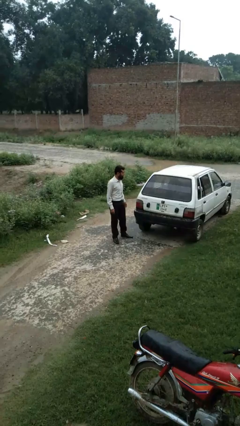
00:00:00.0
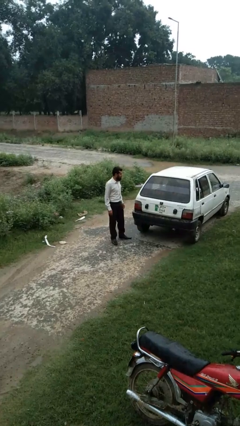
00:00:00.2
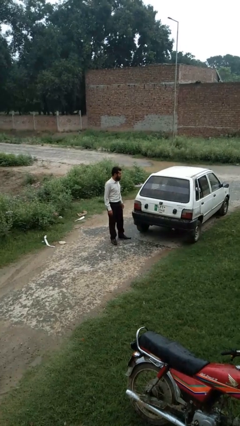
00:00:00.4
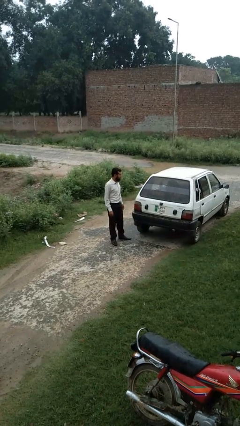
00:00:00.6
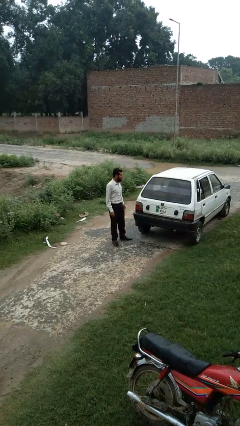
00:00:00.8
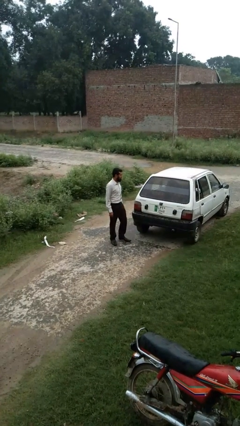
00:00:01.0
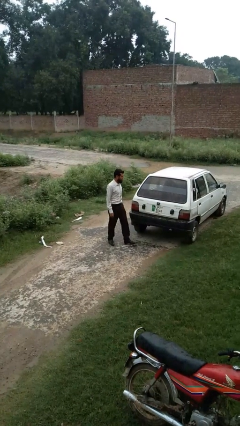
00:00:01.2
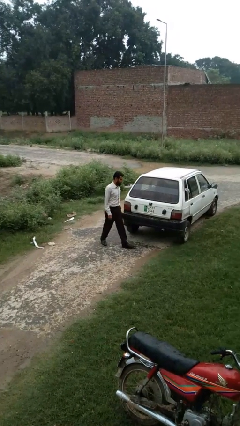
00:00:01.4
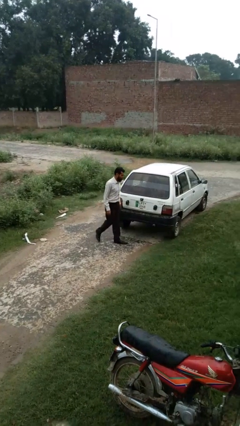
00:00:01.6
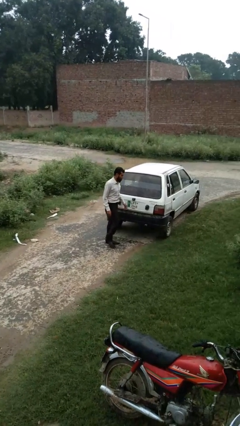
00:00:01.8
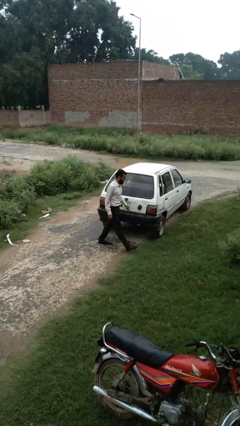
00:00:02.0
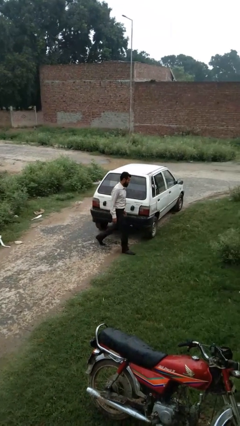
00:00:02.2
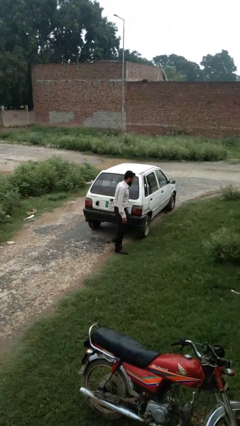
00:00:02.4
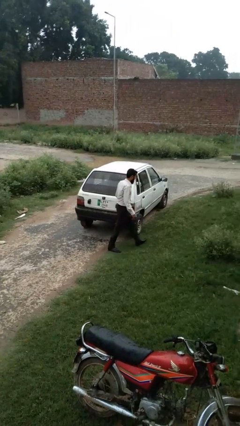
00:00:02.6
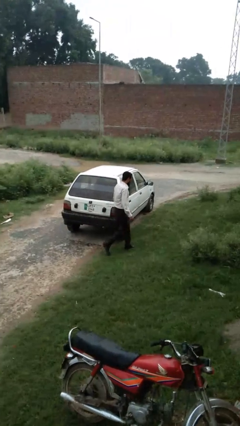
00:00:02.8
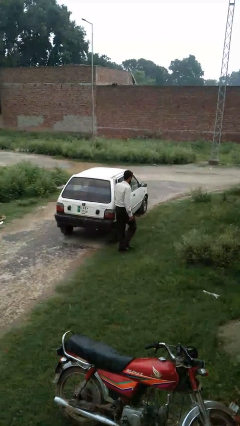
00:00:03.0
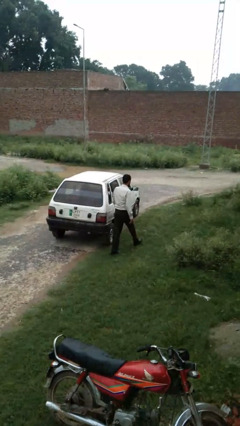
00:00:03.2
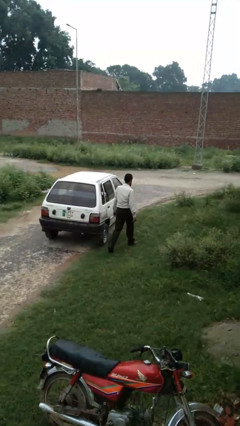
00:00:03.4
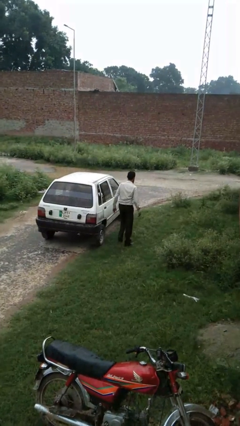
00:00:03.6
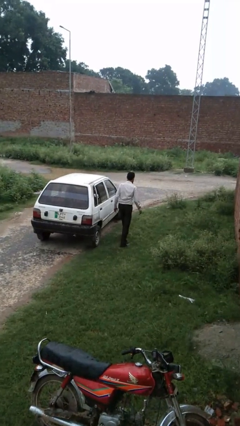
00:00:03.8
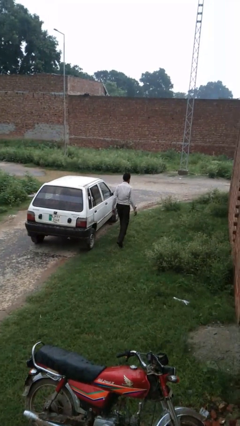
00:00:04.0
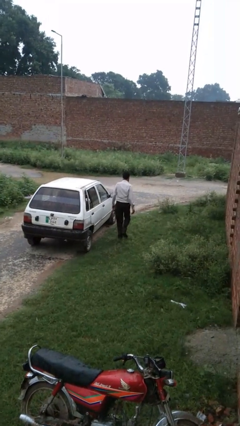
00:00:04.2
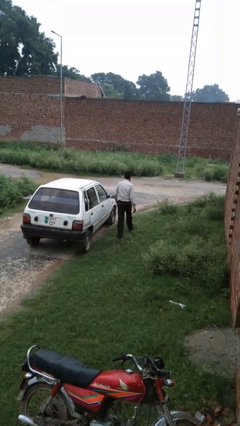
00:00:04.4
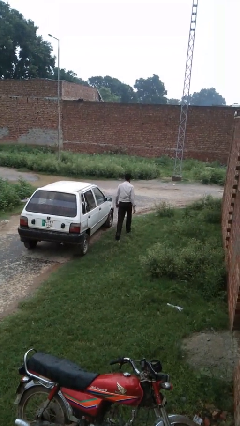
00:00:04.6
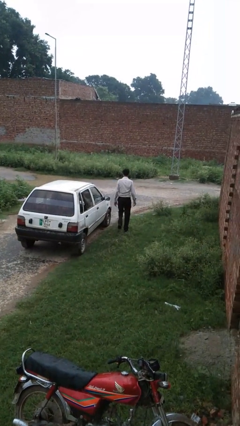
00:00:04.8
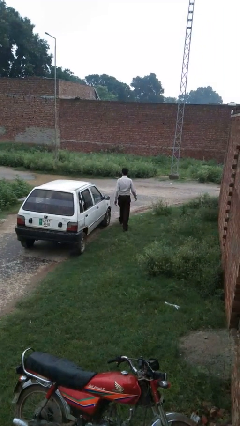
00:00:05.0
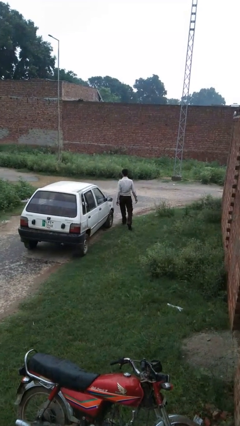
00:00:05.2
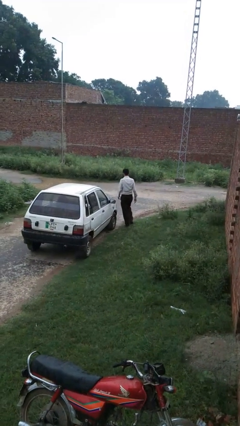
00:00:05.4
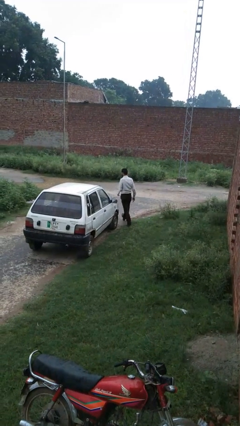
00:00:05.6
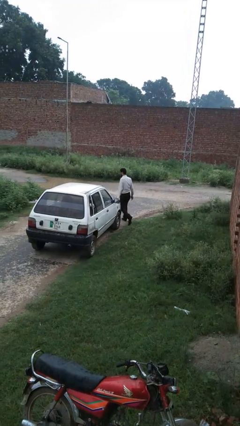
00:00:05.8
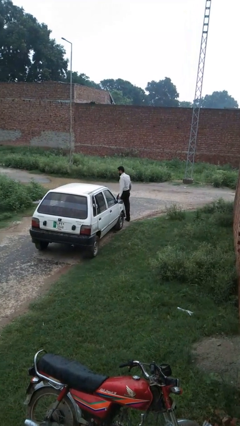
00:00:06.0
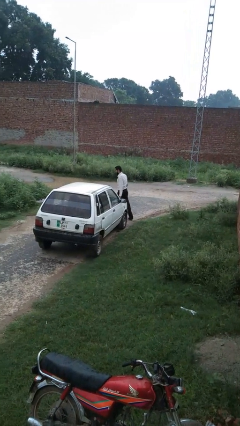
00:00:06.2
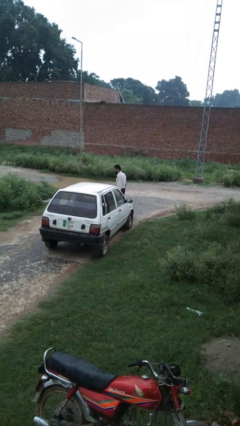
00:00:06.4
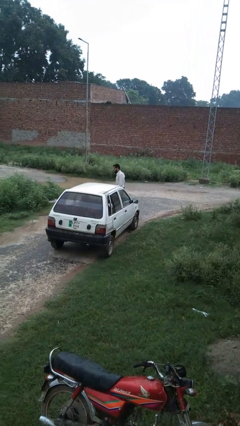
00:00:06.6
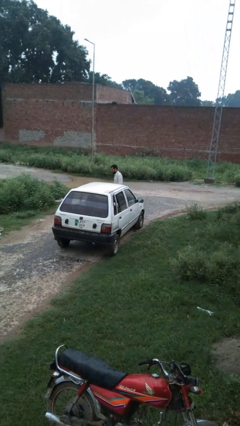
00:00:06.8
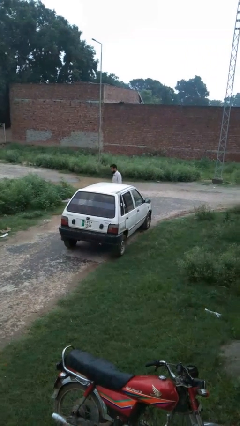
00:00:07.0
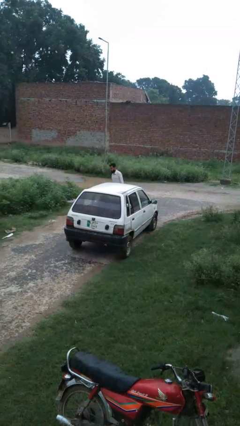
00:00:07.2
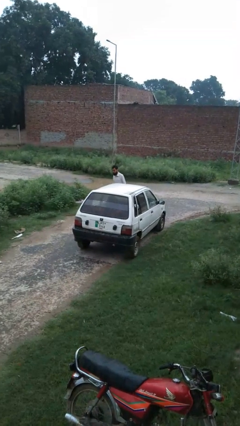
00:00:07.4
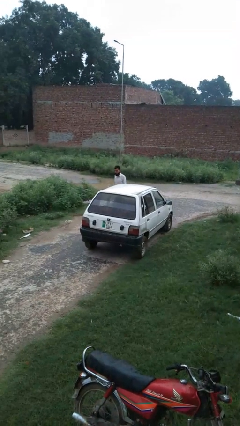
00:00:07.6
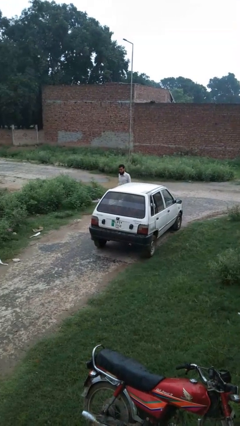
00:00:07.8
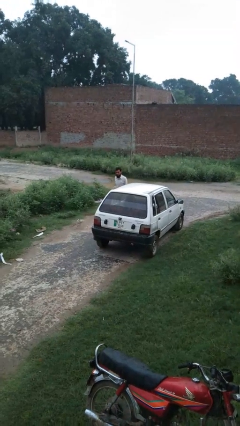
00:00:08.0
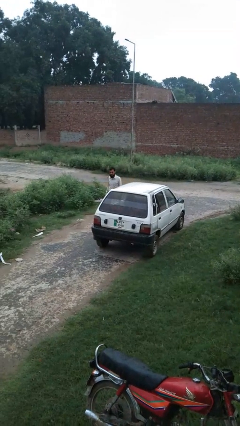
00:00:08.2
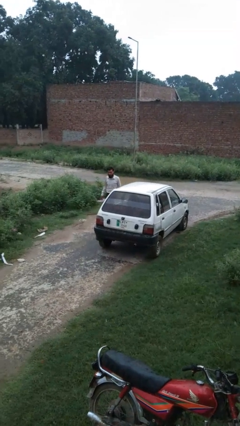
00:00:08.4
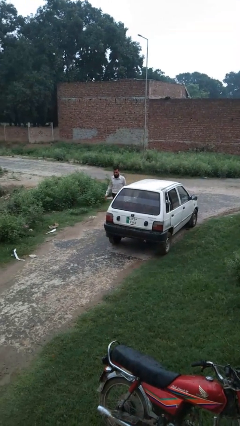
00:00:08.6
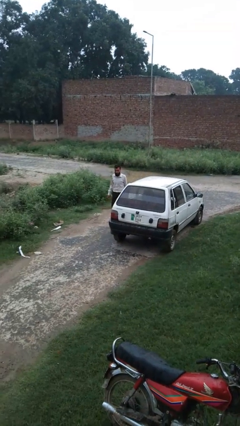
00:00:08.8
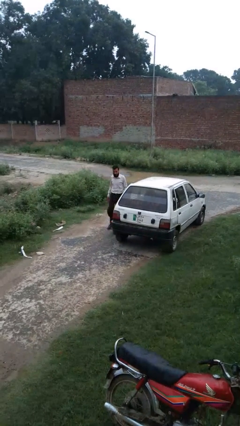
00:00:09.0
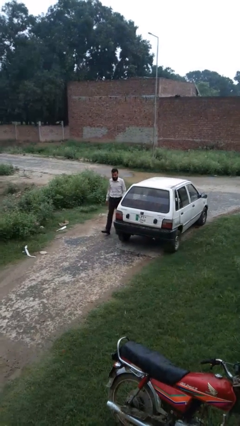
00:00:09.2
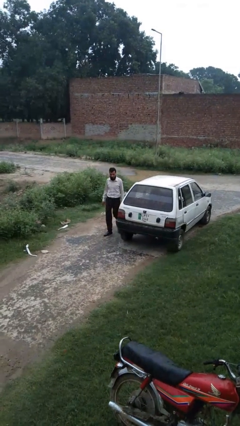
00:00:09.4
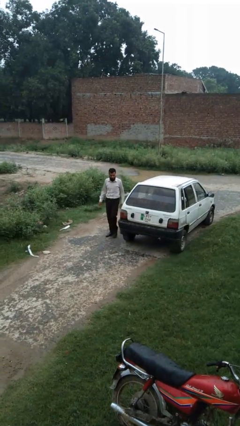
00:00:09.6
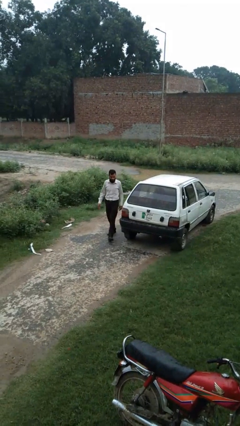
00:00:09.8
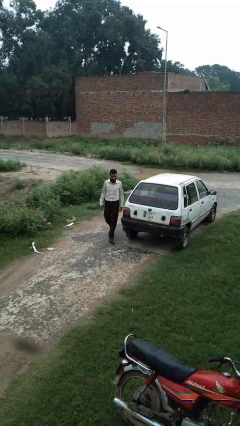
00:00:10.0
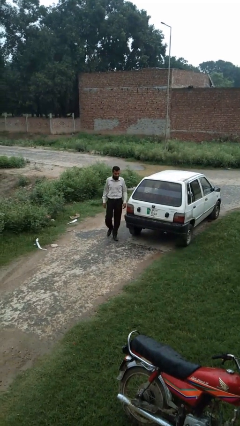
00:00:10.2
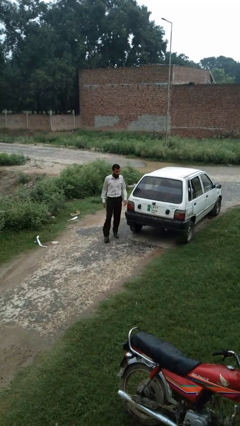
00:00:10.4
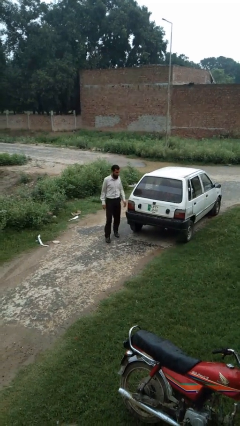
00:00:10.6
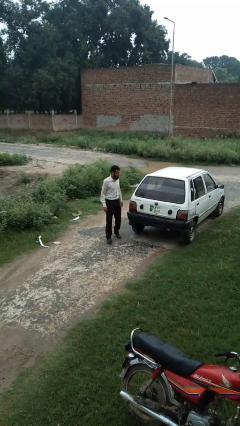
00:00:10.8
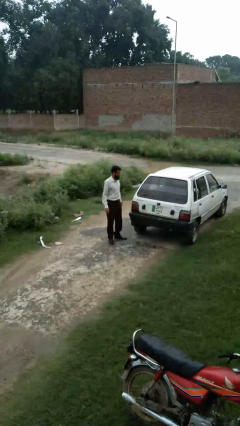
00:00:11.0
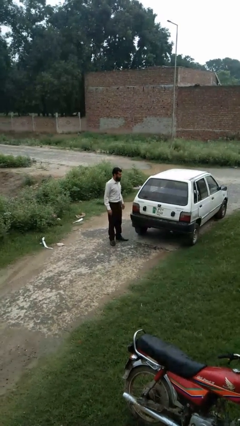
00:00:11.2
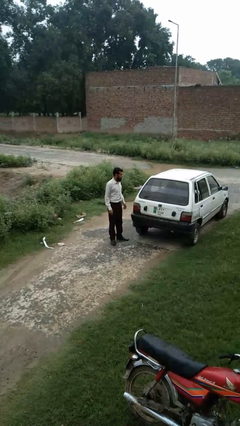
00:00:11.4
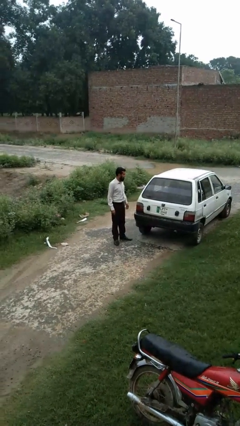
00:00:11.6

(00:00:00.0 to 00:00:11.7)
person walks around car

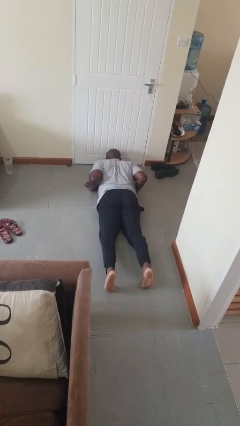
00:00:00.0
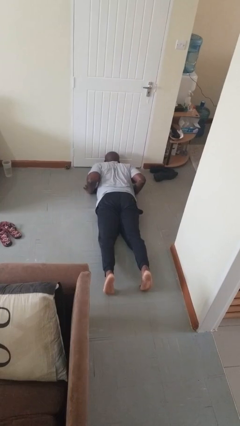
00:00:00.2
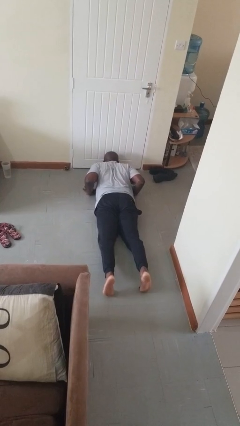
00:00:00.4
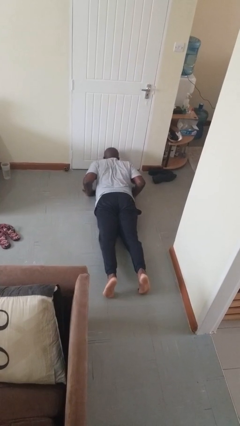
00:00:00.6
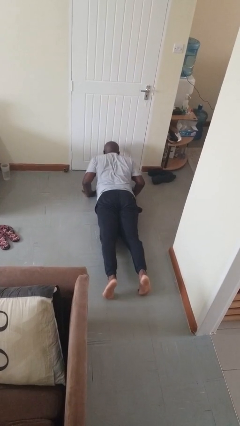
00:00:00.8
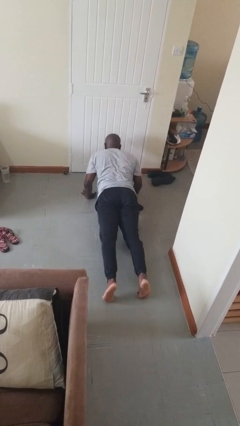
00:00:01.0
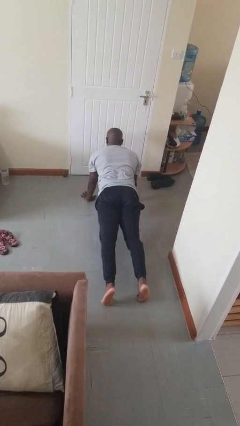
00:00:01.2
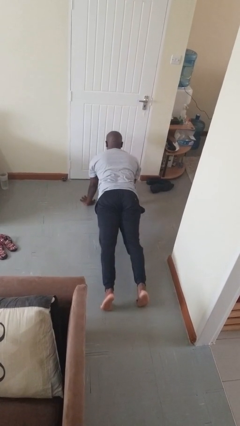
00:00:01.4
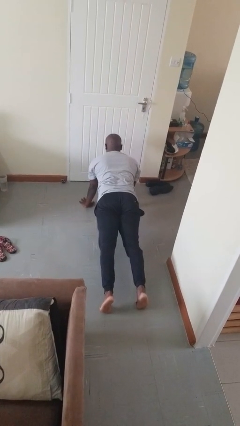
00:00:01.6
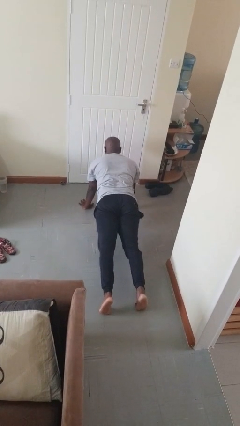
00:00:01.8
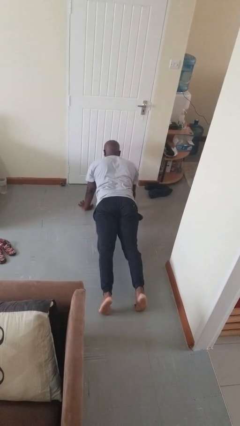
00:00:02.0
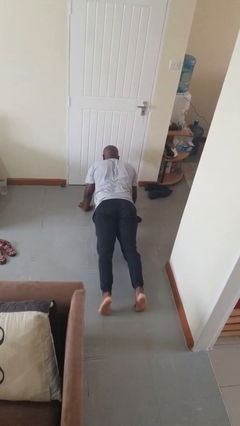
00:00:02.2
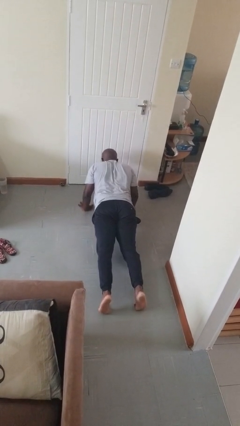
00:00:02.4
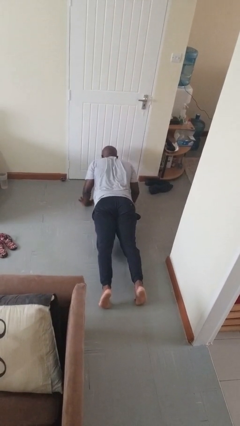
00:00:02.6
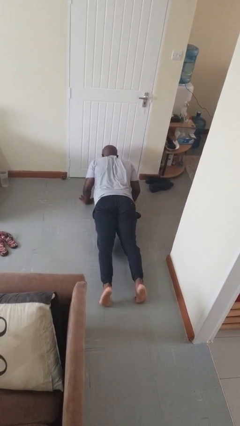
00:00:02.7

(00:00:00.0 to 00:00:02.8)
person exercises with pushup

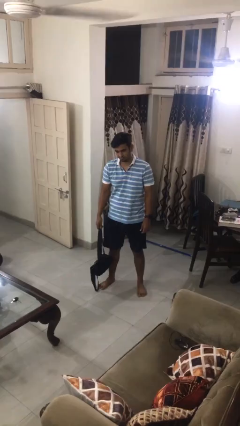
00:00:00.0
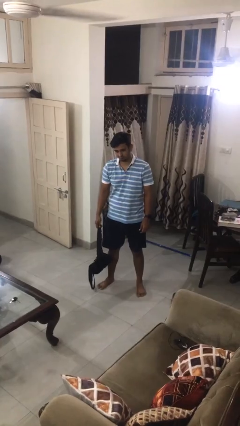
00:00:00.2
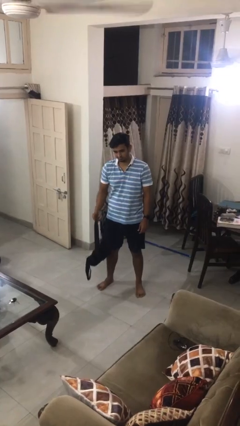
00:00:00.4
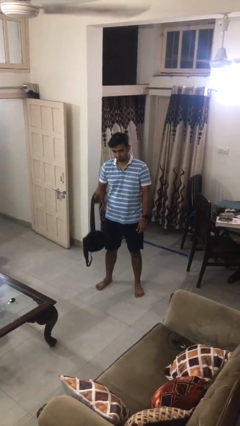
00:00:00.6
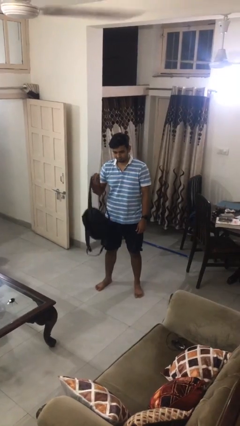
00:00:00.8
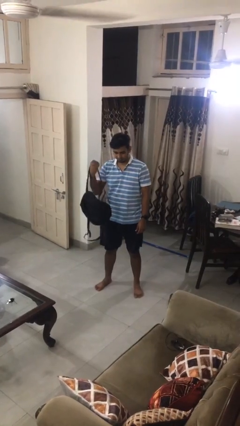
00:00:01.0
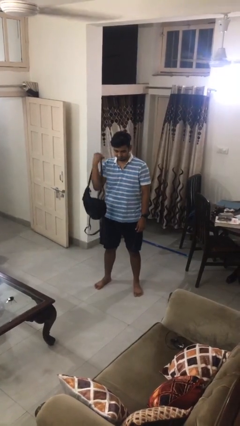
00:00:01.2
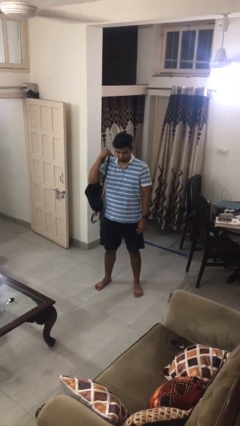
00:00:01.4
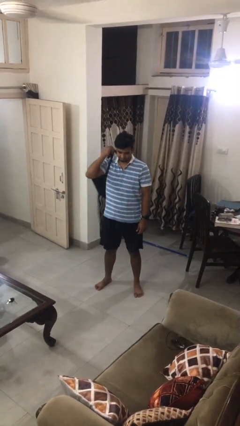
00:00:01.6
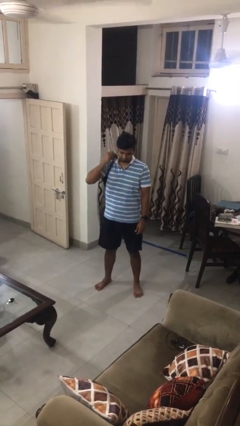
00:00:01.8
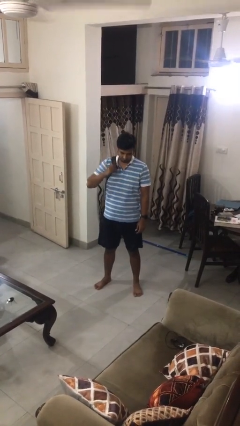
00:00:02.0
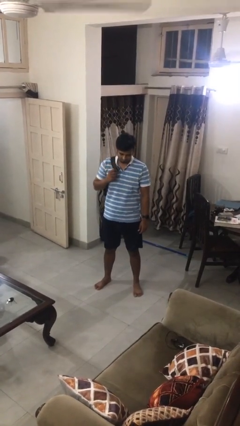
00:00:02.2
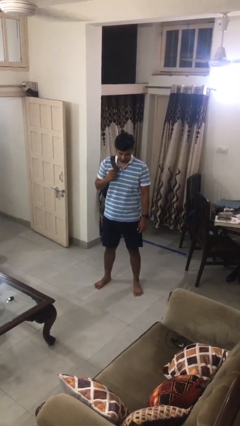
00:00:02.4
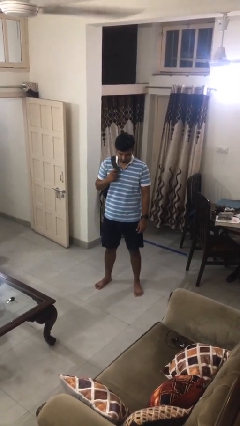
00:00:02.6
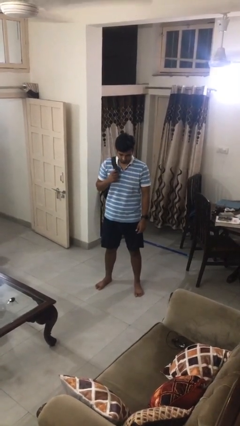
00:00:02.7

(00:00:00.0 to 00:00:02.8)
person puts on backpack

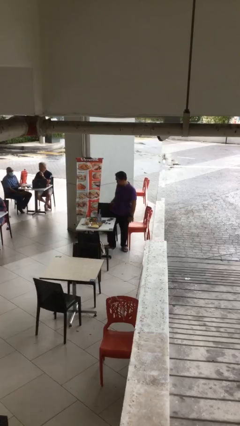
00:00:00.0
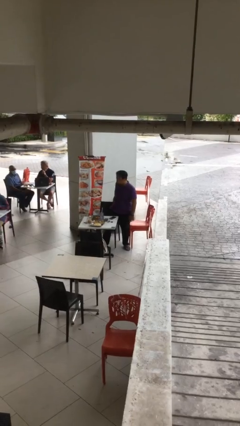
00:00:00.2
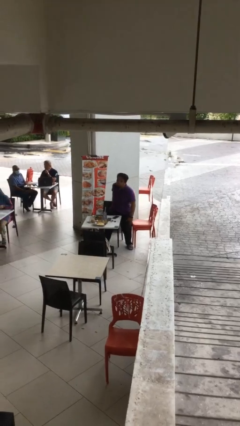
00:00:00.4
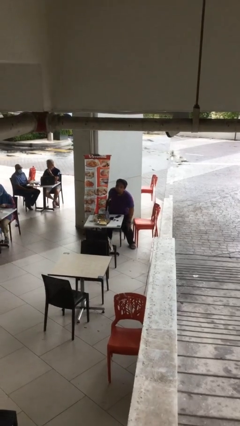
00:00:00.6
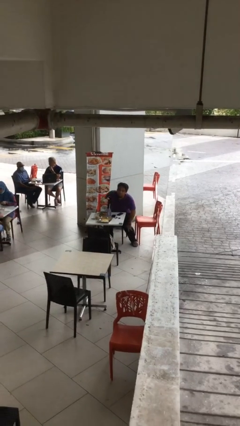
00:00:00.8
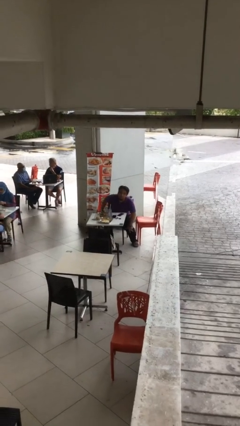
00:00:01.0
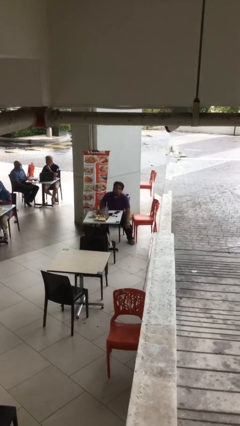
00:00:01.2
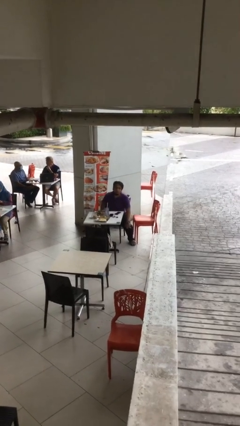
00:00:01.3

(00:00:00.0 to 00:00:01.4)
person sits down
